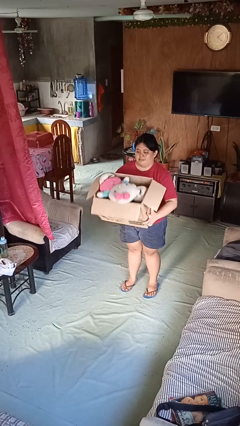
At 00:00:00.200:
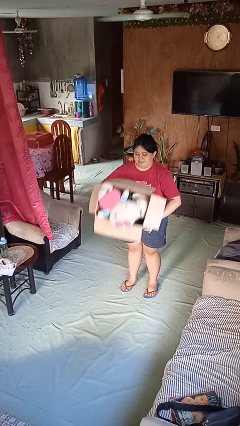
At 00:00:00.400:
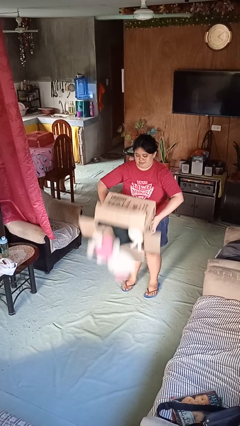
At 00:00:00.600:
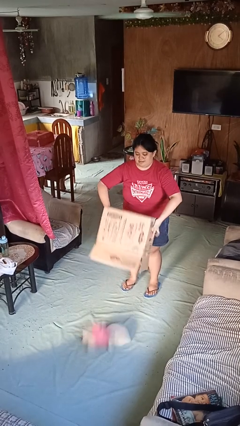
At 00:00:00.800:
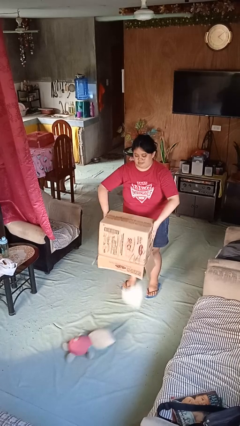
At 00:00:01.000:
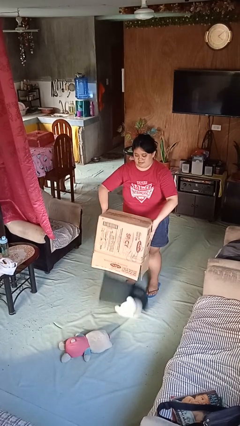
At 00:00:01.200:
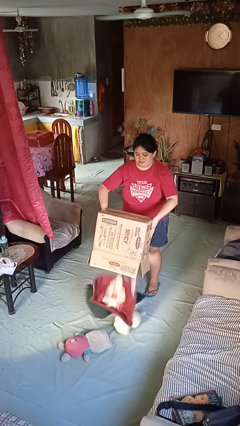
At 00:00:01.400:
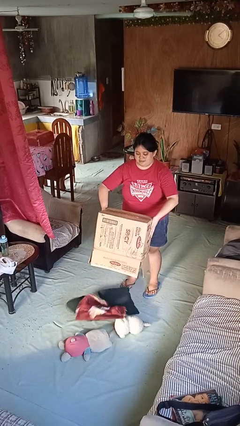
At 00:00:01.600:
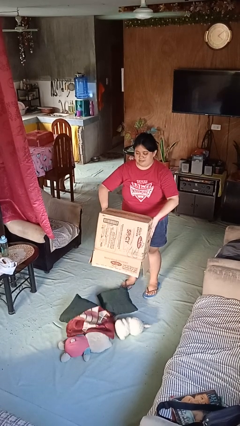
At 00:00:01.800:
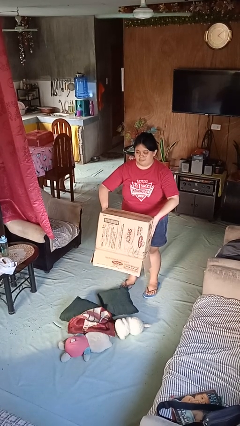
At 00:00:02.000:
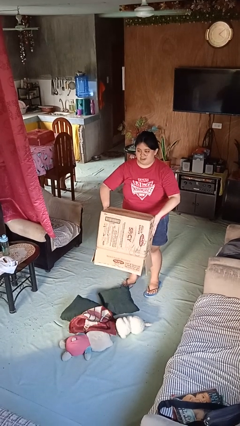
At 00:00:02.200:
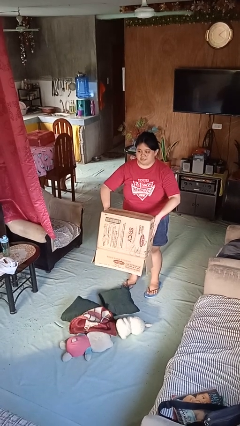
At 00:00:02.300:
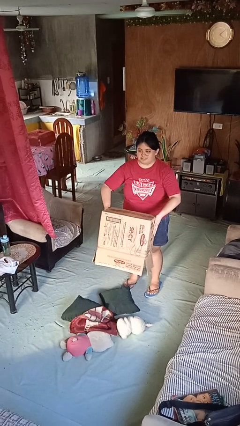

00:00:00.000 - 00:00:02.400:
person unloads box onto floor

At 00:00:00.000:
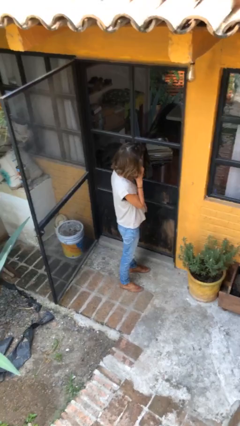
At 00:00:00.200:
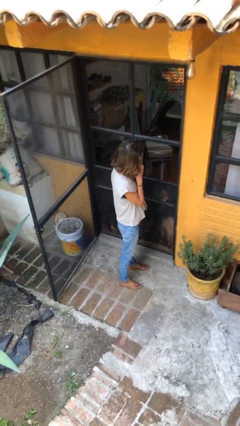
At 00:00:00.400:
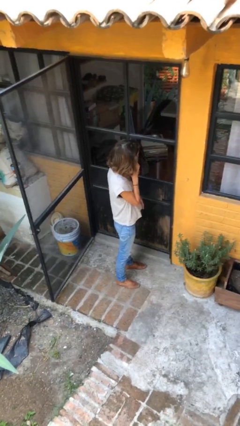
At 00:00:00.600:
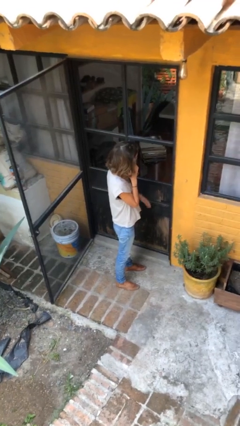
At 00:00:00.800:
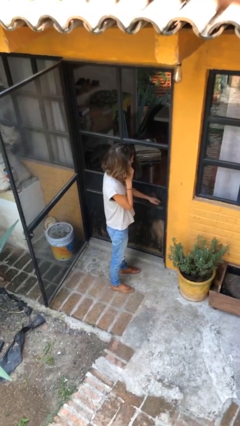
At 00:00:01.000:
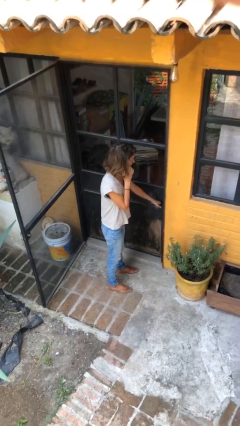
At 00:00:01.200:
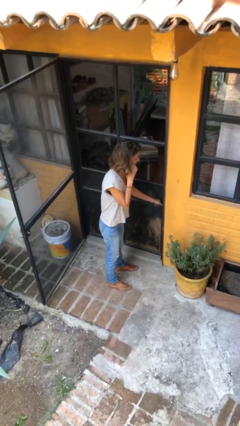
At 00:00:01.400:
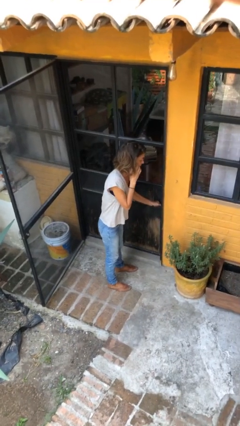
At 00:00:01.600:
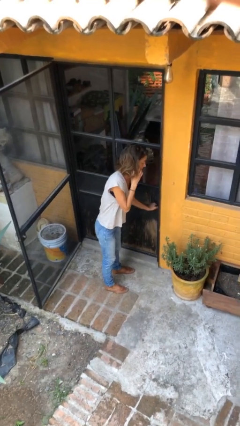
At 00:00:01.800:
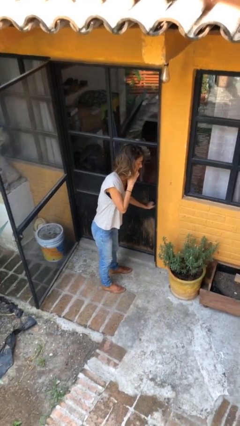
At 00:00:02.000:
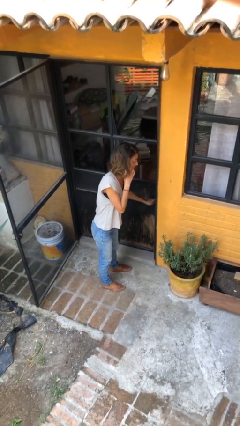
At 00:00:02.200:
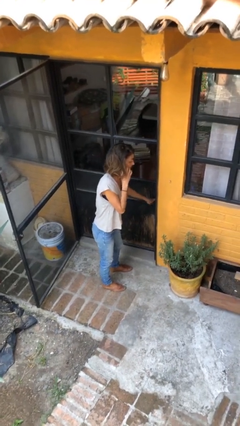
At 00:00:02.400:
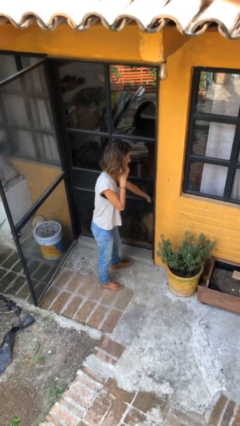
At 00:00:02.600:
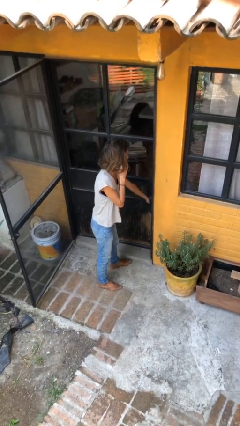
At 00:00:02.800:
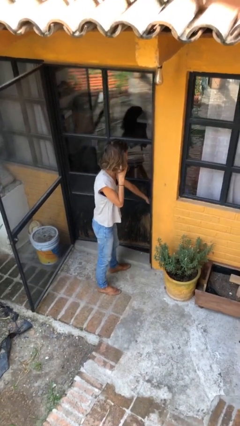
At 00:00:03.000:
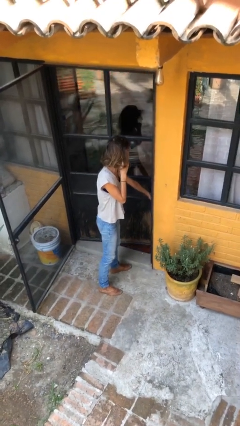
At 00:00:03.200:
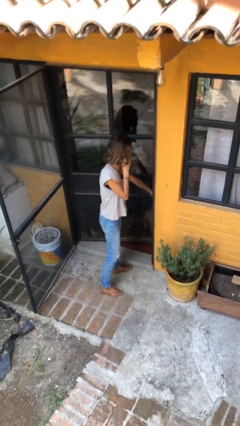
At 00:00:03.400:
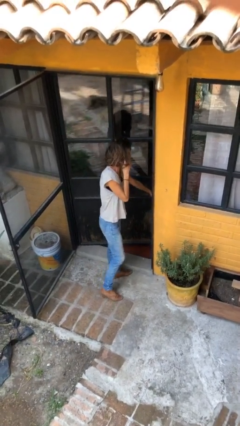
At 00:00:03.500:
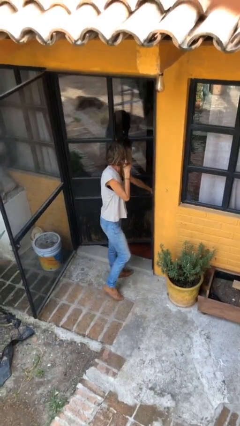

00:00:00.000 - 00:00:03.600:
person opens facility door

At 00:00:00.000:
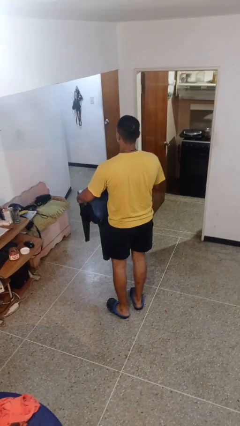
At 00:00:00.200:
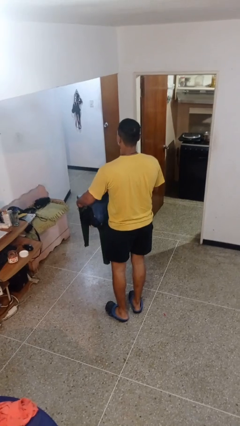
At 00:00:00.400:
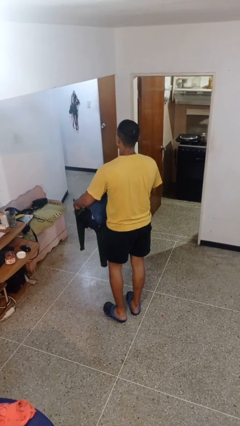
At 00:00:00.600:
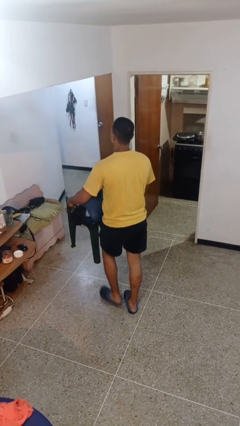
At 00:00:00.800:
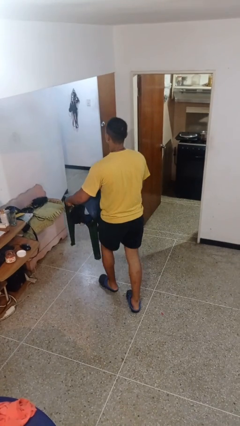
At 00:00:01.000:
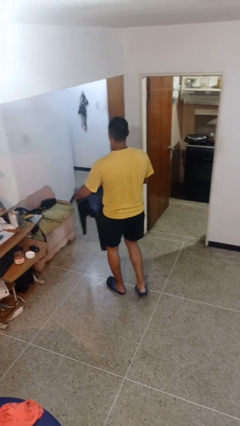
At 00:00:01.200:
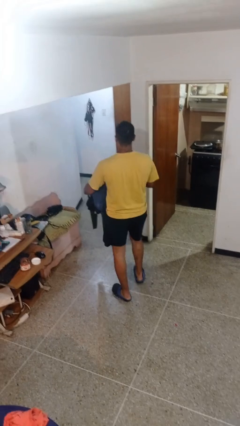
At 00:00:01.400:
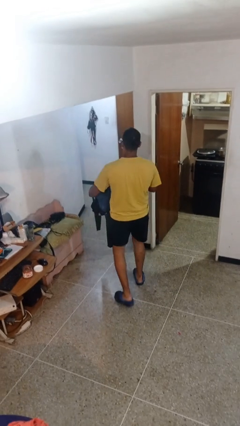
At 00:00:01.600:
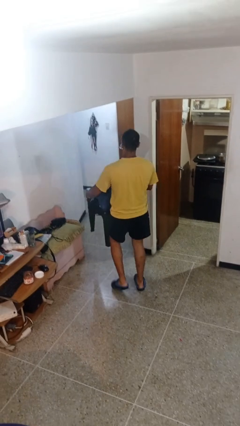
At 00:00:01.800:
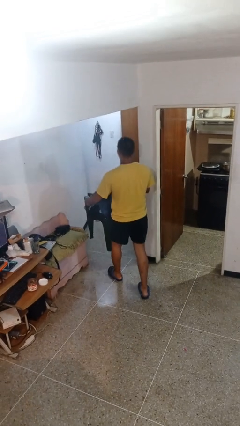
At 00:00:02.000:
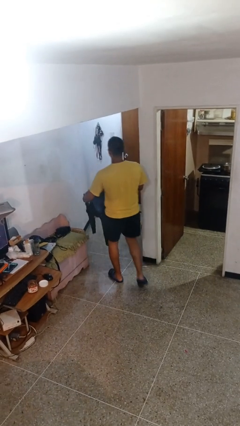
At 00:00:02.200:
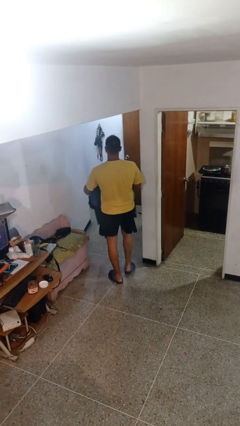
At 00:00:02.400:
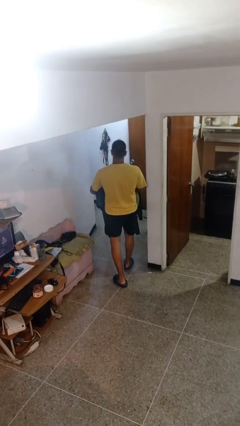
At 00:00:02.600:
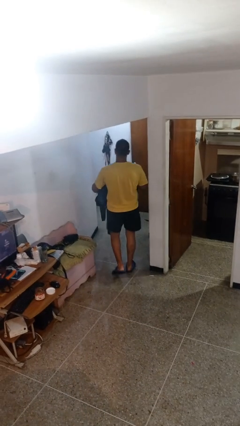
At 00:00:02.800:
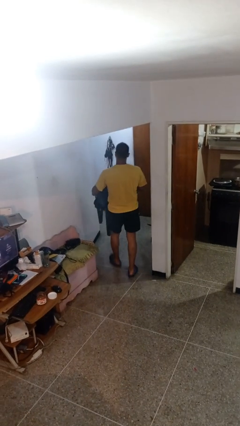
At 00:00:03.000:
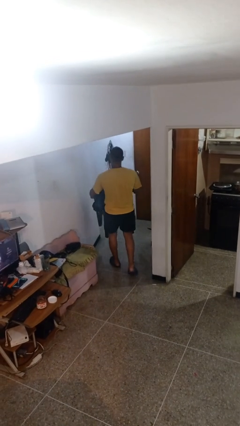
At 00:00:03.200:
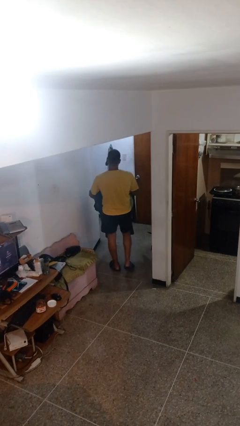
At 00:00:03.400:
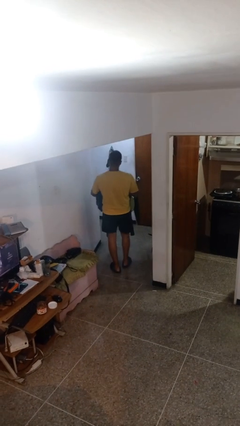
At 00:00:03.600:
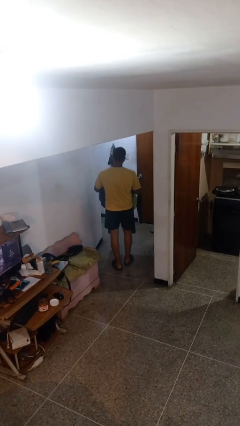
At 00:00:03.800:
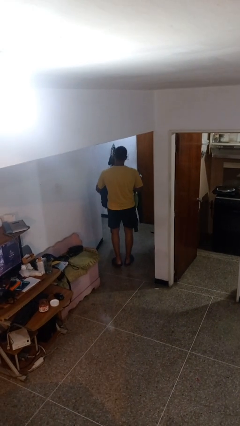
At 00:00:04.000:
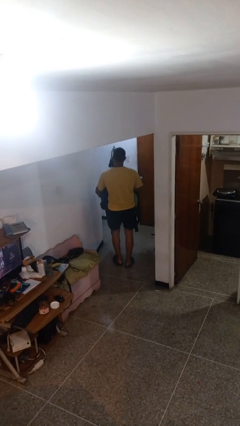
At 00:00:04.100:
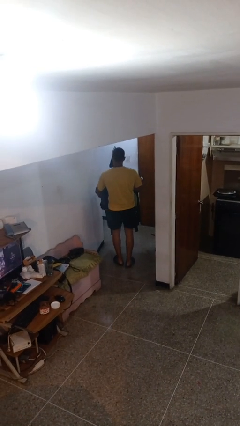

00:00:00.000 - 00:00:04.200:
person carries furniture

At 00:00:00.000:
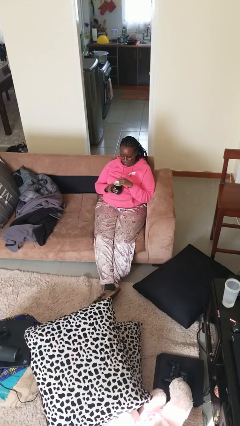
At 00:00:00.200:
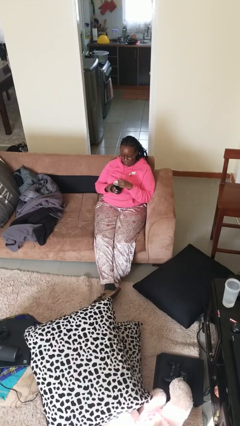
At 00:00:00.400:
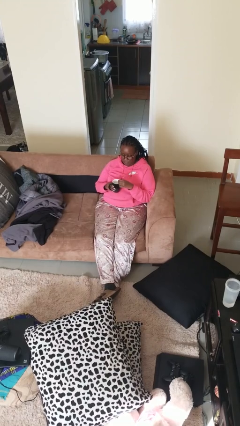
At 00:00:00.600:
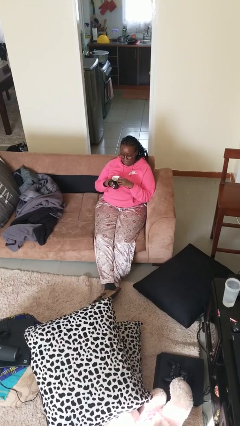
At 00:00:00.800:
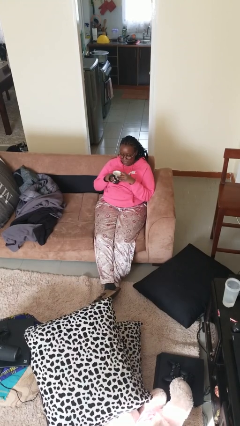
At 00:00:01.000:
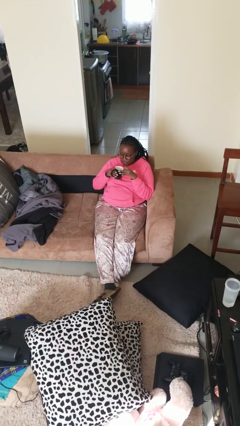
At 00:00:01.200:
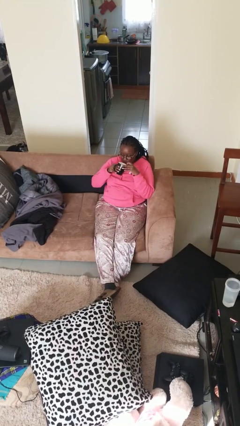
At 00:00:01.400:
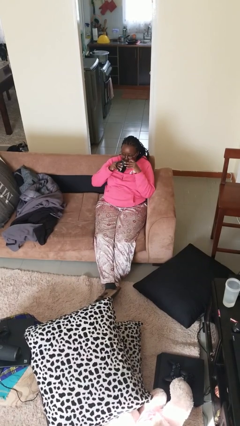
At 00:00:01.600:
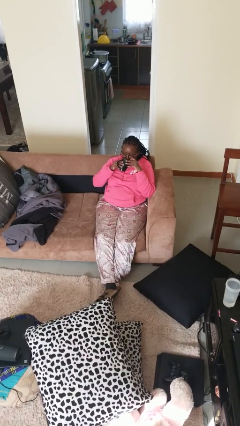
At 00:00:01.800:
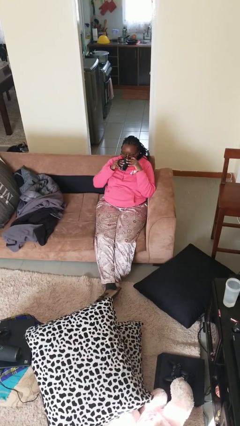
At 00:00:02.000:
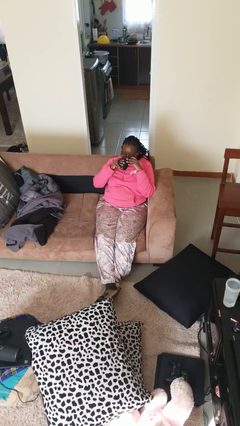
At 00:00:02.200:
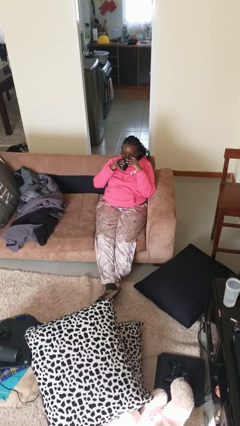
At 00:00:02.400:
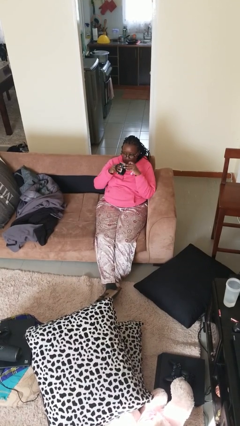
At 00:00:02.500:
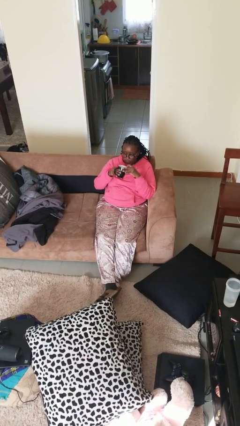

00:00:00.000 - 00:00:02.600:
person drinks from mug

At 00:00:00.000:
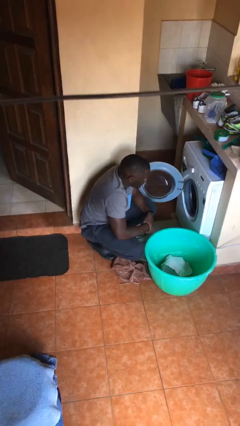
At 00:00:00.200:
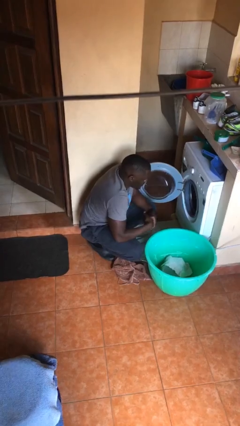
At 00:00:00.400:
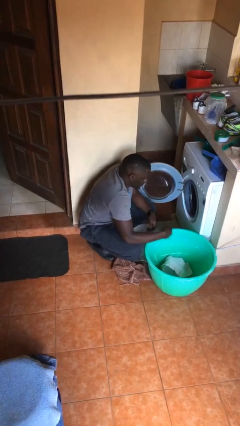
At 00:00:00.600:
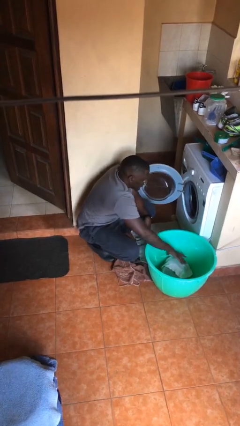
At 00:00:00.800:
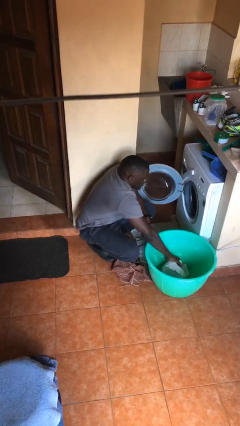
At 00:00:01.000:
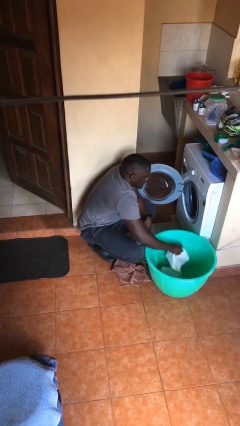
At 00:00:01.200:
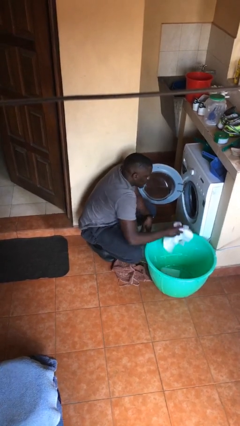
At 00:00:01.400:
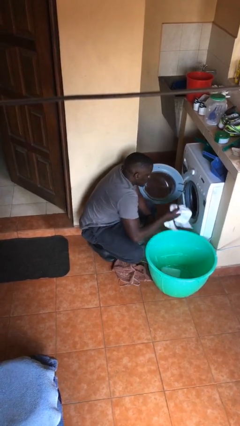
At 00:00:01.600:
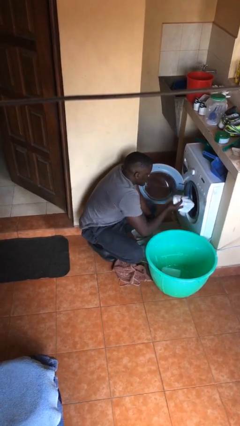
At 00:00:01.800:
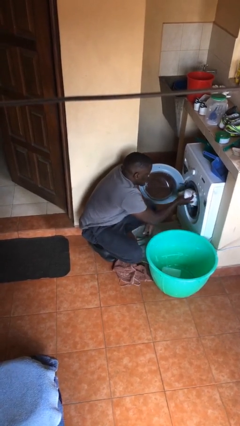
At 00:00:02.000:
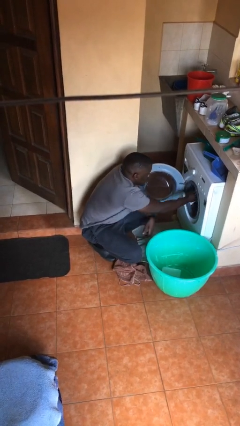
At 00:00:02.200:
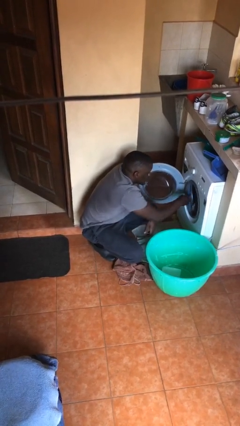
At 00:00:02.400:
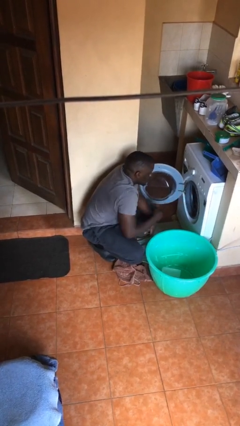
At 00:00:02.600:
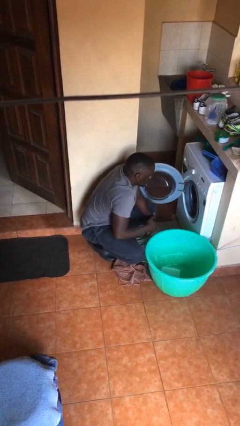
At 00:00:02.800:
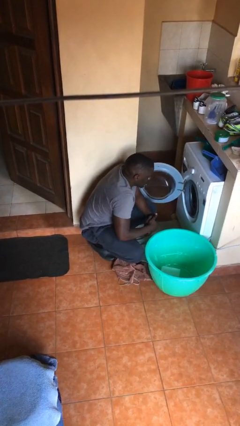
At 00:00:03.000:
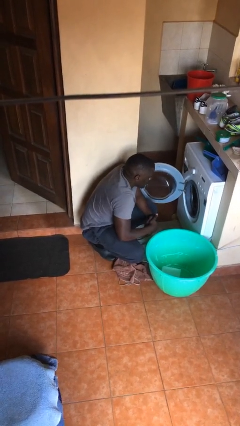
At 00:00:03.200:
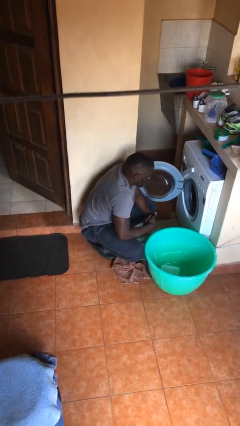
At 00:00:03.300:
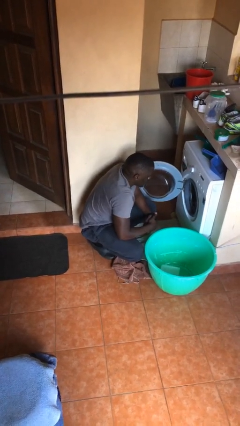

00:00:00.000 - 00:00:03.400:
person loads clotheswasher

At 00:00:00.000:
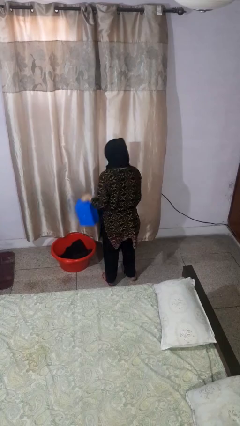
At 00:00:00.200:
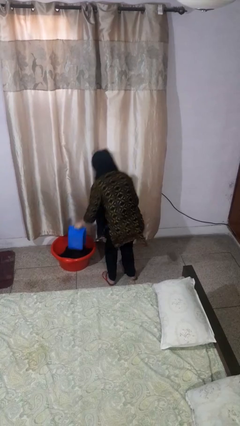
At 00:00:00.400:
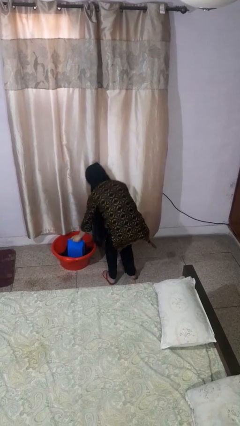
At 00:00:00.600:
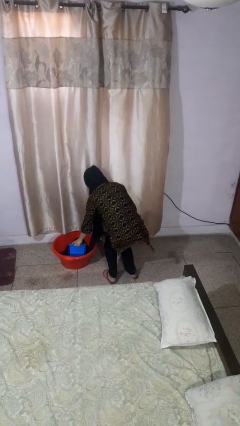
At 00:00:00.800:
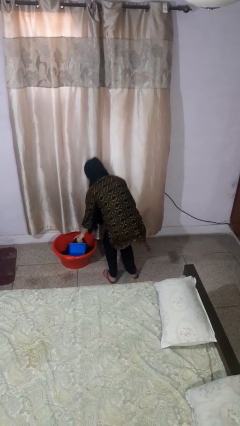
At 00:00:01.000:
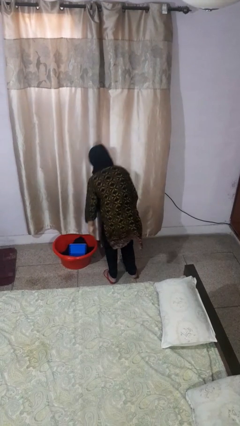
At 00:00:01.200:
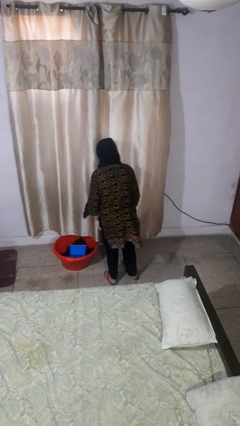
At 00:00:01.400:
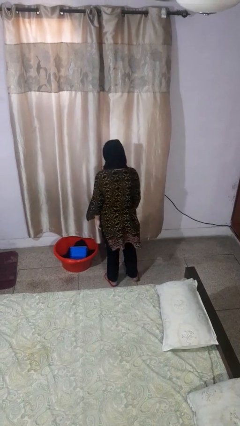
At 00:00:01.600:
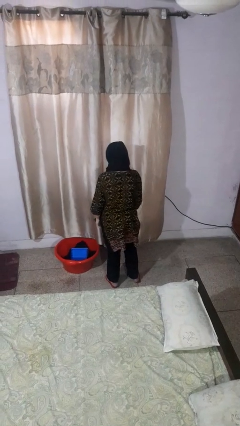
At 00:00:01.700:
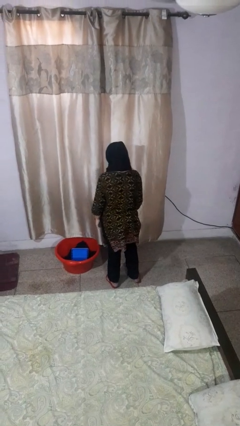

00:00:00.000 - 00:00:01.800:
person puts object into basket
